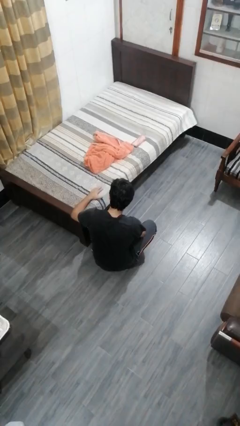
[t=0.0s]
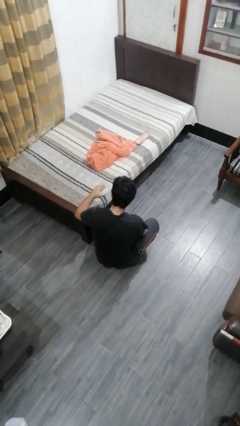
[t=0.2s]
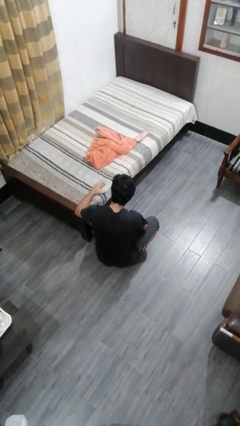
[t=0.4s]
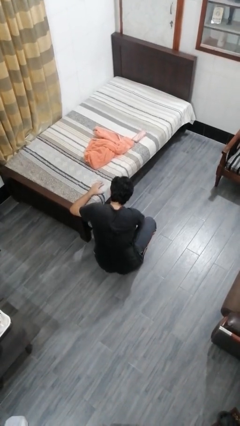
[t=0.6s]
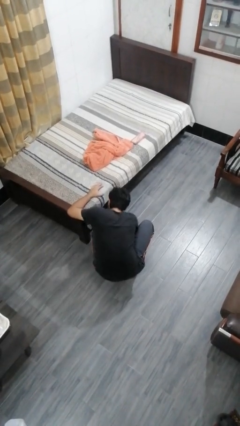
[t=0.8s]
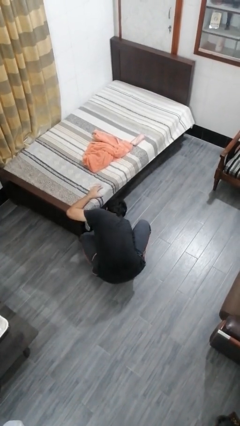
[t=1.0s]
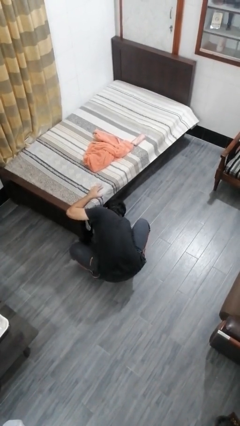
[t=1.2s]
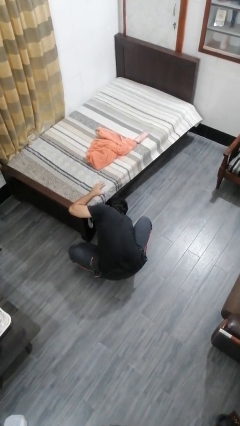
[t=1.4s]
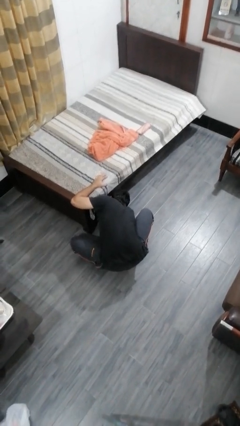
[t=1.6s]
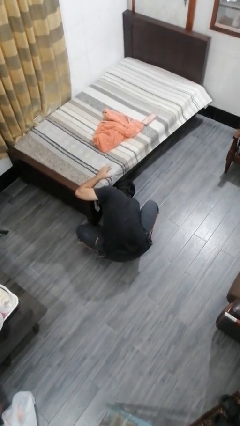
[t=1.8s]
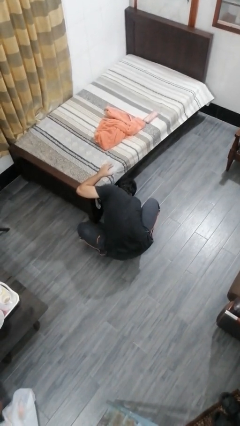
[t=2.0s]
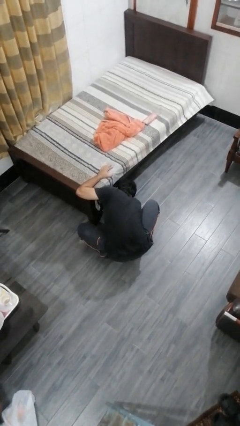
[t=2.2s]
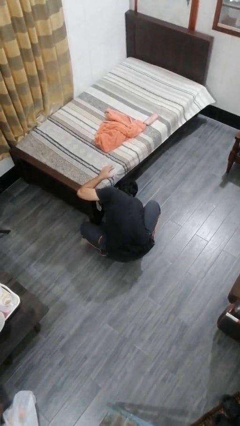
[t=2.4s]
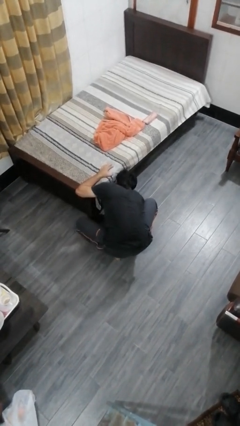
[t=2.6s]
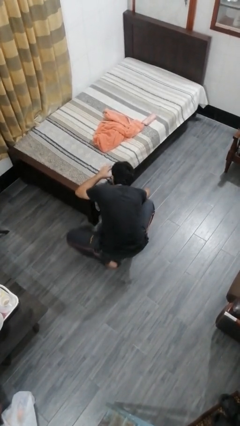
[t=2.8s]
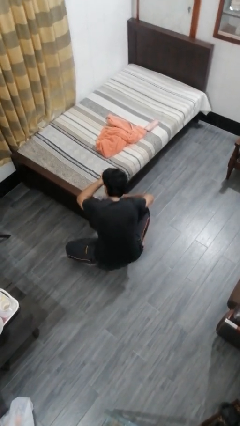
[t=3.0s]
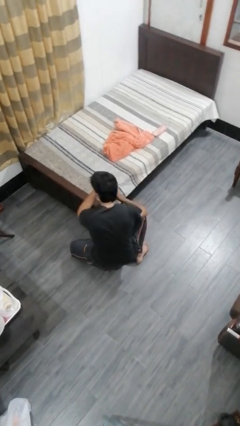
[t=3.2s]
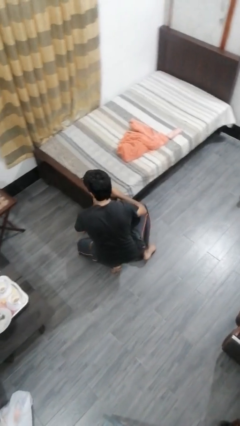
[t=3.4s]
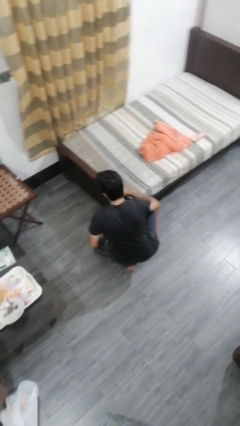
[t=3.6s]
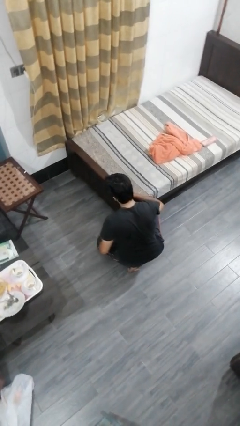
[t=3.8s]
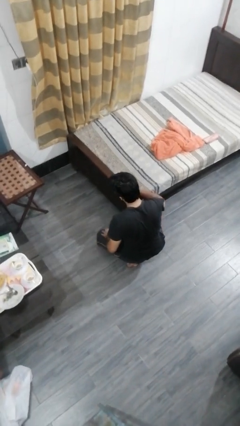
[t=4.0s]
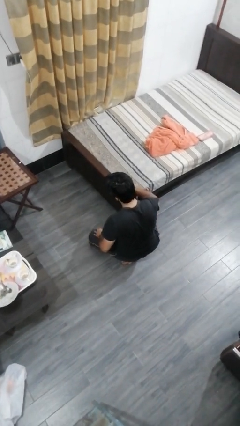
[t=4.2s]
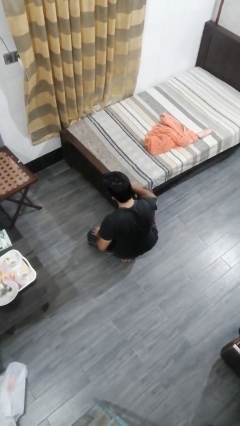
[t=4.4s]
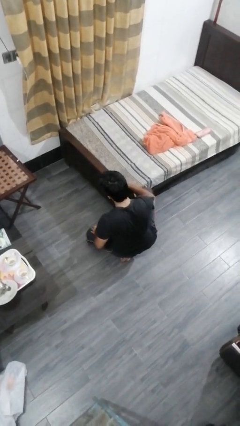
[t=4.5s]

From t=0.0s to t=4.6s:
person searches under bed

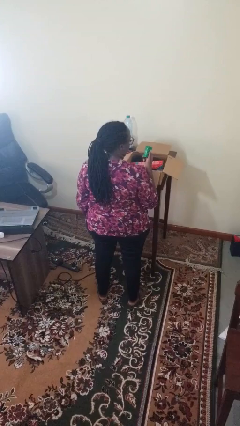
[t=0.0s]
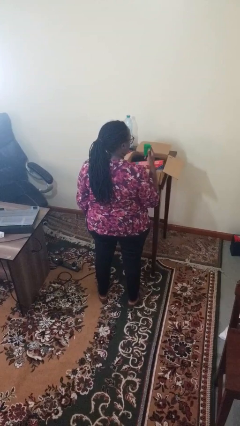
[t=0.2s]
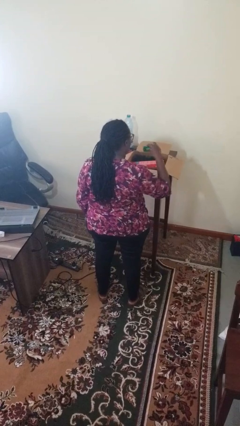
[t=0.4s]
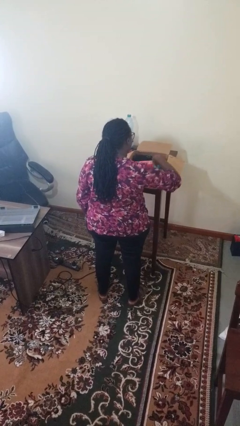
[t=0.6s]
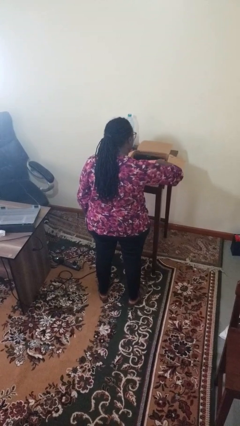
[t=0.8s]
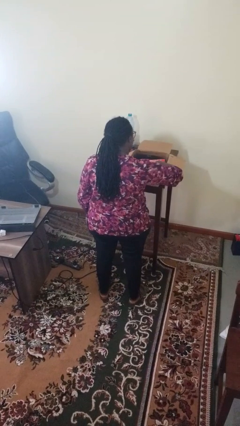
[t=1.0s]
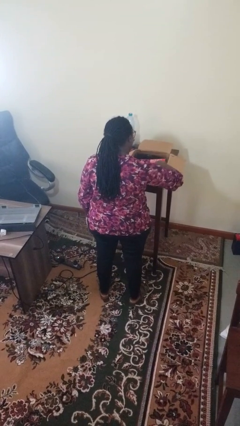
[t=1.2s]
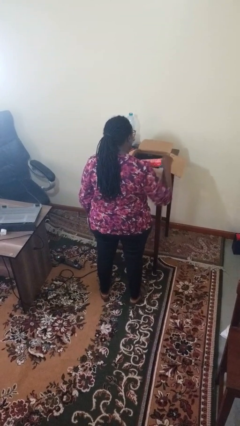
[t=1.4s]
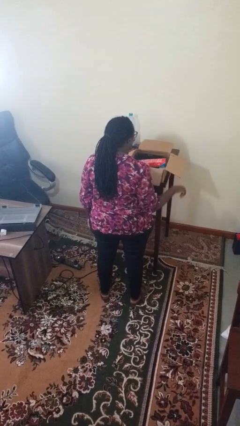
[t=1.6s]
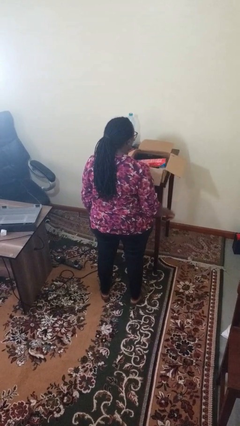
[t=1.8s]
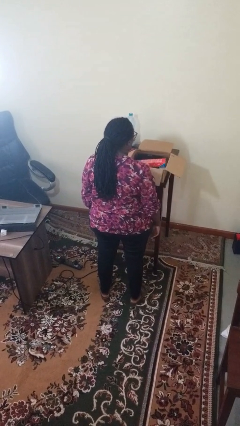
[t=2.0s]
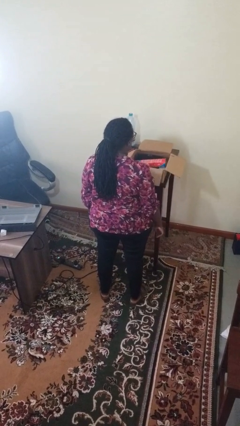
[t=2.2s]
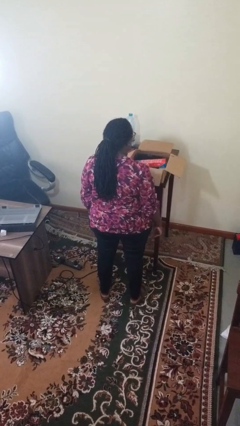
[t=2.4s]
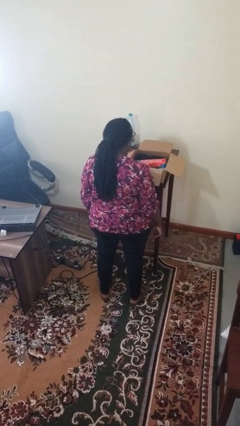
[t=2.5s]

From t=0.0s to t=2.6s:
person puts object into box

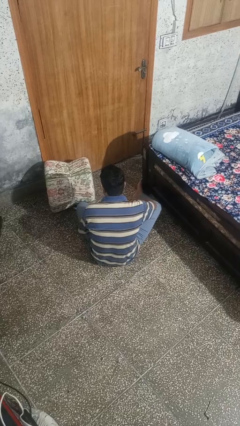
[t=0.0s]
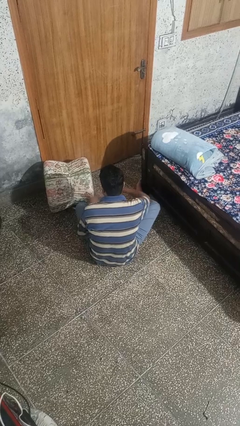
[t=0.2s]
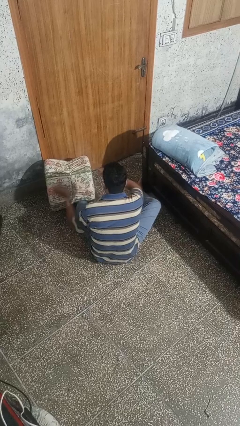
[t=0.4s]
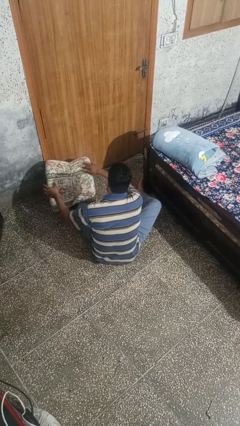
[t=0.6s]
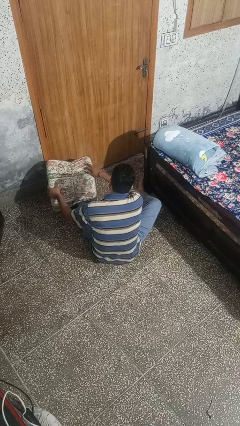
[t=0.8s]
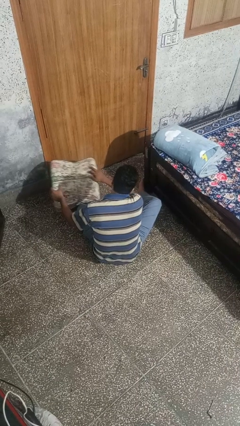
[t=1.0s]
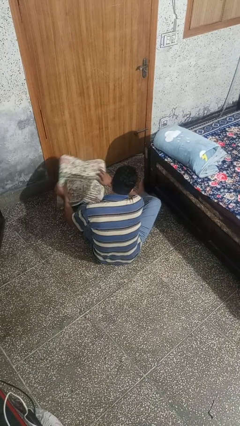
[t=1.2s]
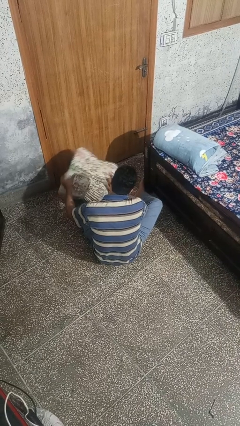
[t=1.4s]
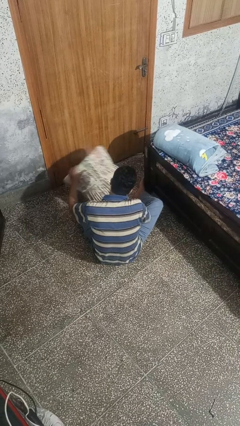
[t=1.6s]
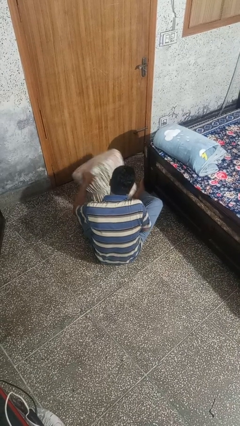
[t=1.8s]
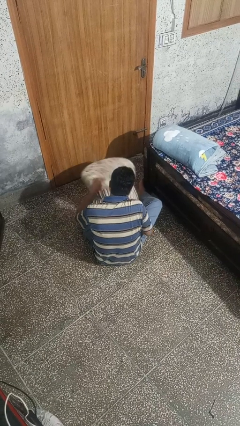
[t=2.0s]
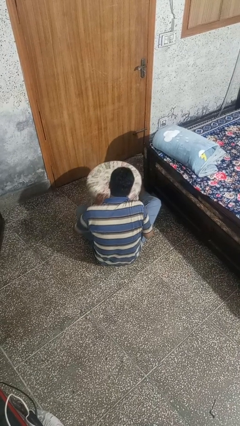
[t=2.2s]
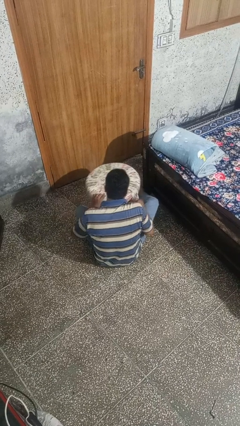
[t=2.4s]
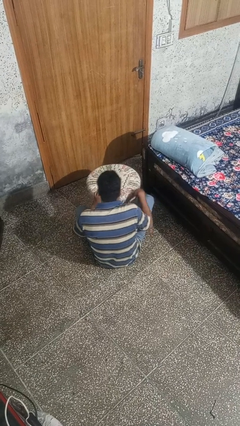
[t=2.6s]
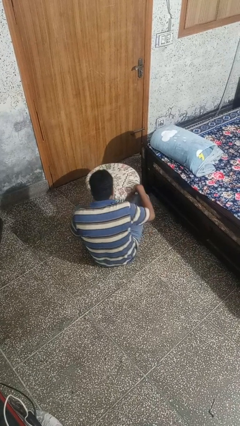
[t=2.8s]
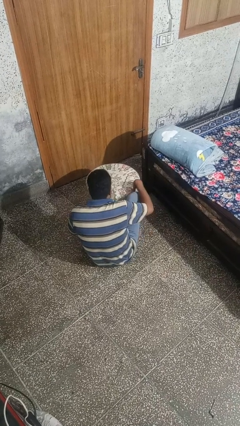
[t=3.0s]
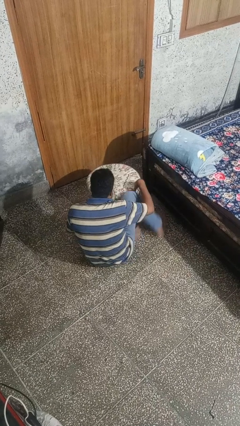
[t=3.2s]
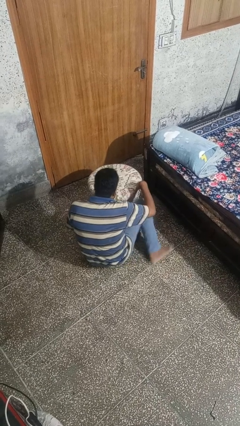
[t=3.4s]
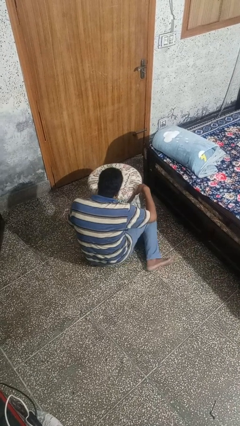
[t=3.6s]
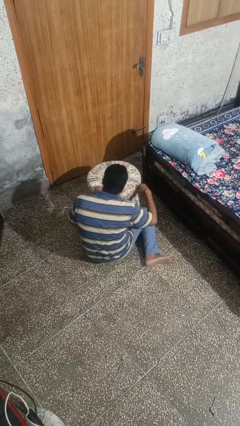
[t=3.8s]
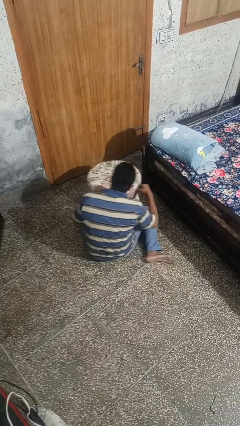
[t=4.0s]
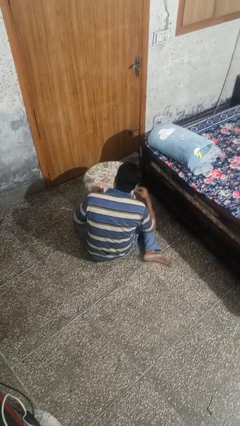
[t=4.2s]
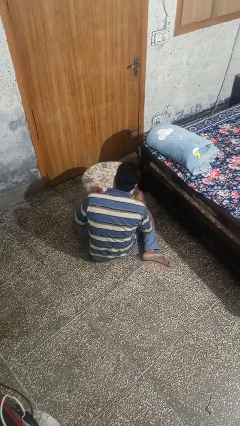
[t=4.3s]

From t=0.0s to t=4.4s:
person sets upright furniture

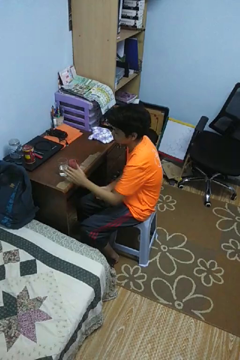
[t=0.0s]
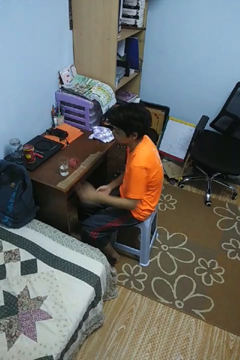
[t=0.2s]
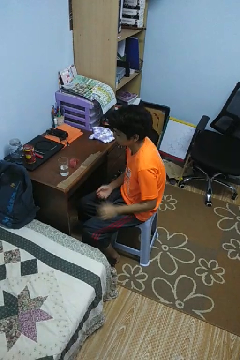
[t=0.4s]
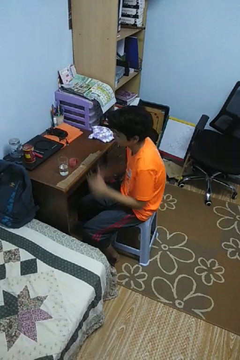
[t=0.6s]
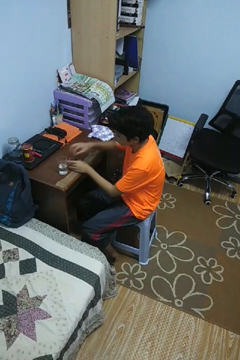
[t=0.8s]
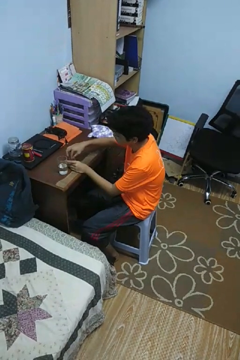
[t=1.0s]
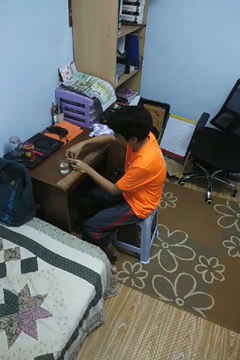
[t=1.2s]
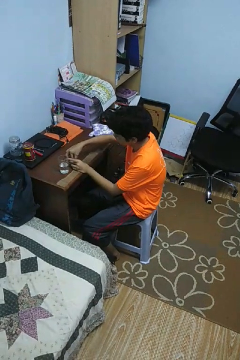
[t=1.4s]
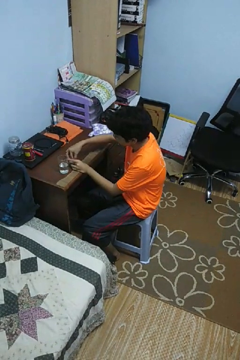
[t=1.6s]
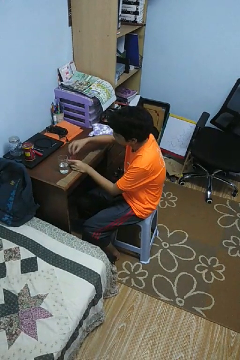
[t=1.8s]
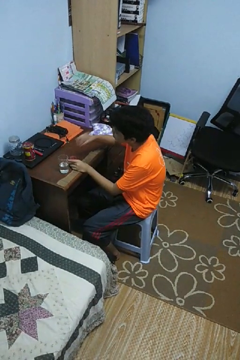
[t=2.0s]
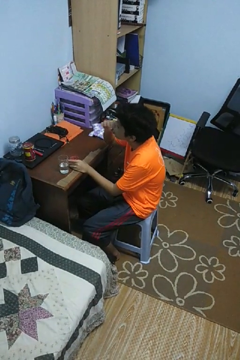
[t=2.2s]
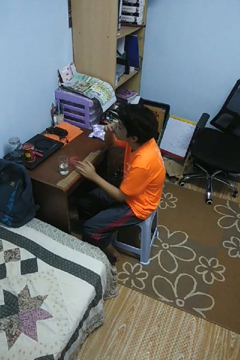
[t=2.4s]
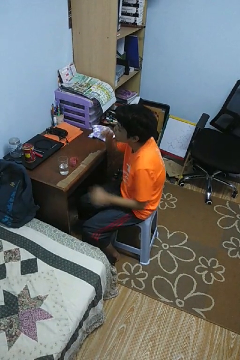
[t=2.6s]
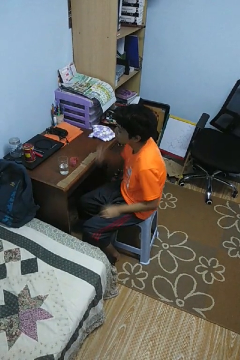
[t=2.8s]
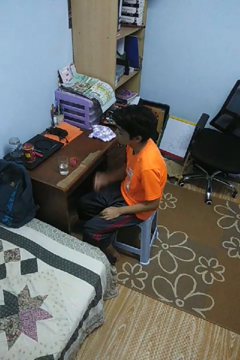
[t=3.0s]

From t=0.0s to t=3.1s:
person takes medicine pills

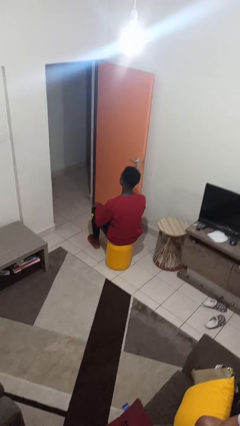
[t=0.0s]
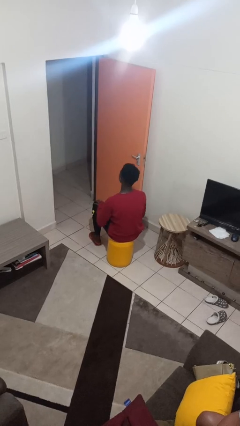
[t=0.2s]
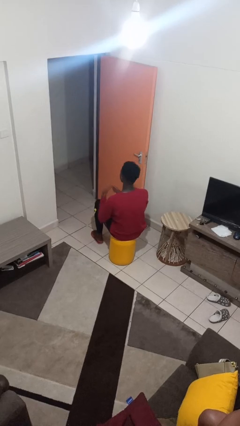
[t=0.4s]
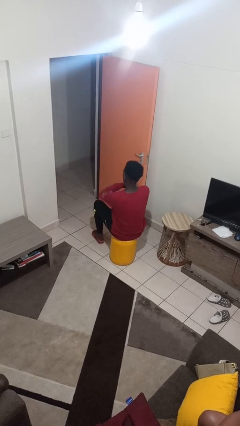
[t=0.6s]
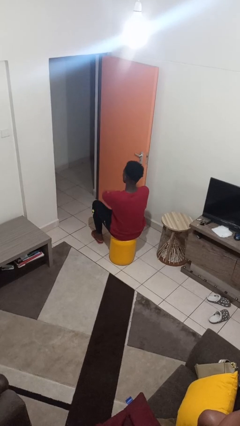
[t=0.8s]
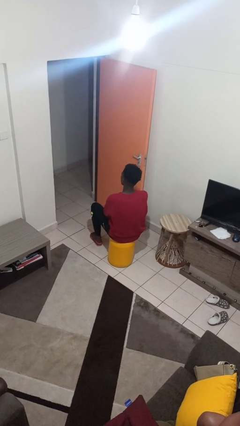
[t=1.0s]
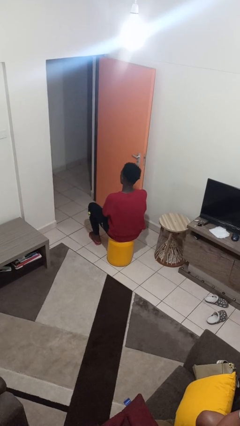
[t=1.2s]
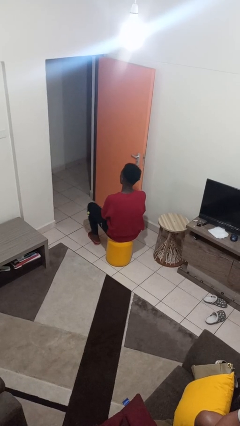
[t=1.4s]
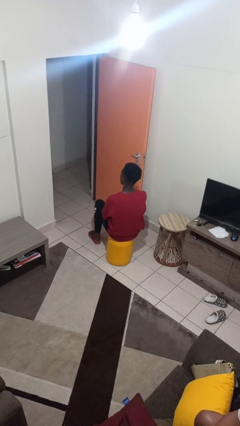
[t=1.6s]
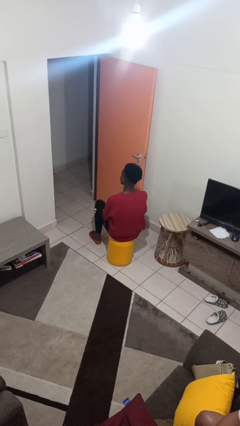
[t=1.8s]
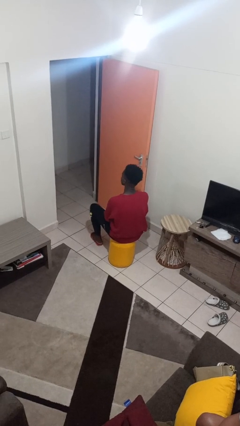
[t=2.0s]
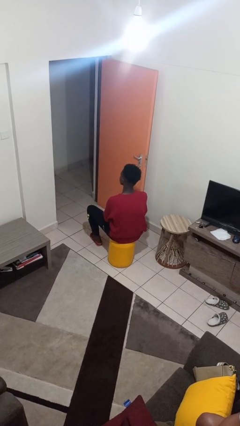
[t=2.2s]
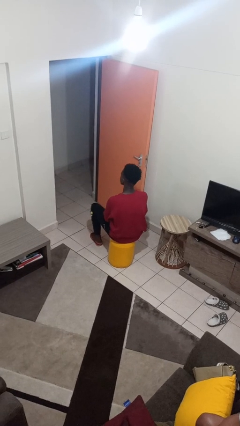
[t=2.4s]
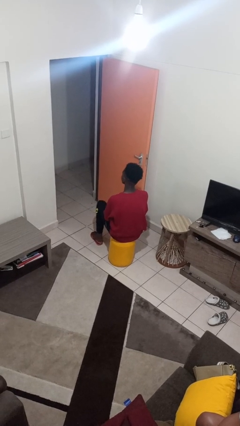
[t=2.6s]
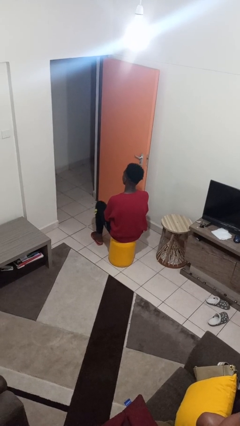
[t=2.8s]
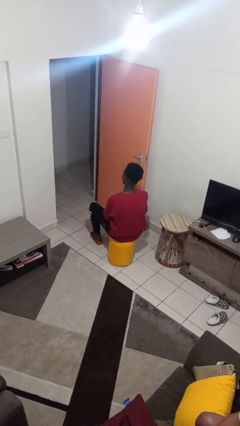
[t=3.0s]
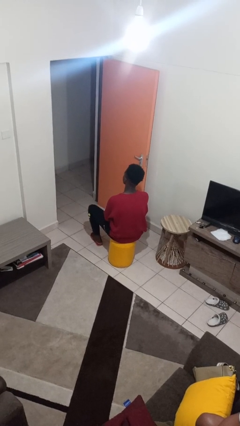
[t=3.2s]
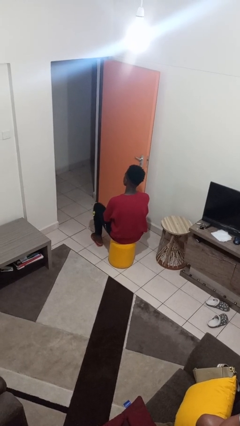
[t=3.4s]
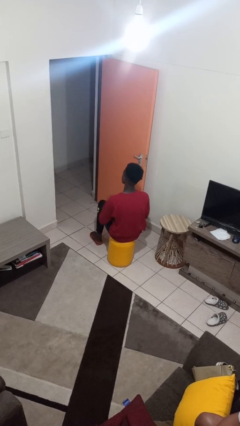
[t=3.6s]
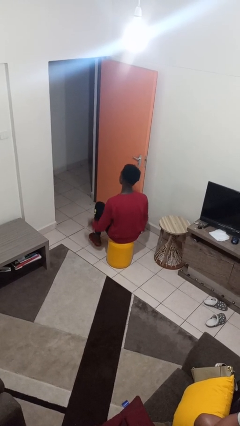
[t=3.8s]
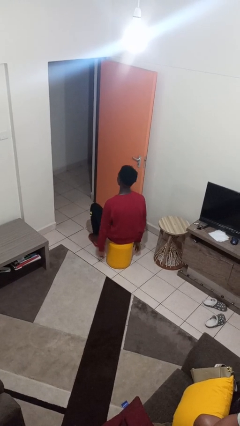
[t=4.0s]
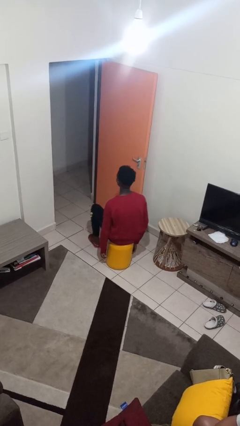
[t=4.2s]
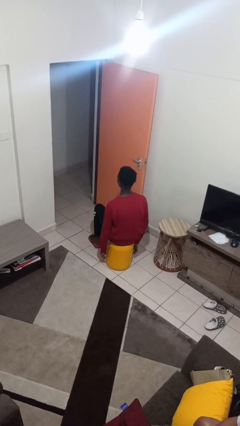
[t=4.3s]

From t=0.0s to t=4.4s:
person crosses arms
